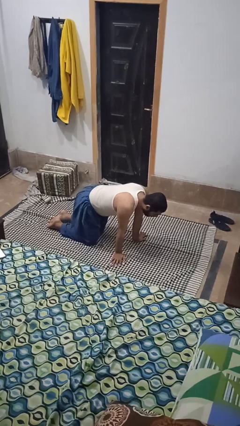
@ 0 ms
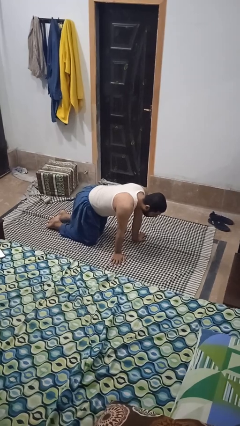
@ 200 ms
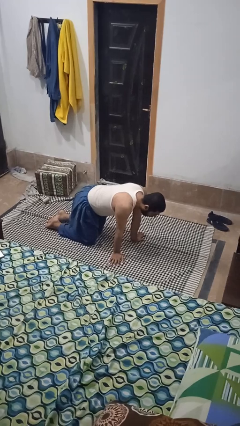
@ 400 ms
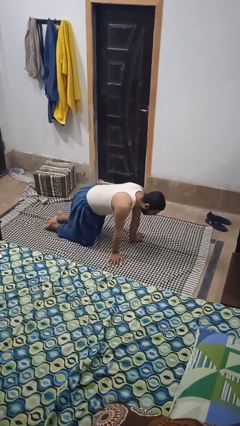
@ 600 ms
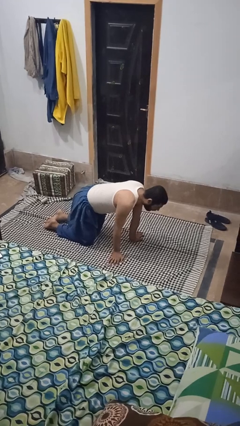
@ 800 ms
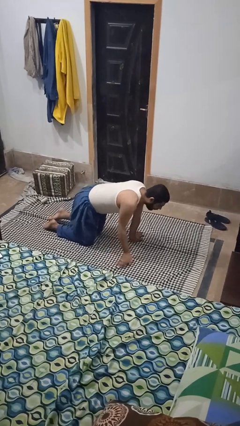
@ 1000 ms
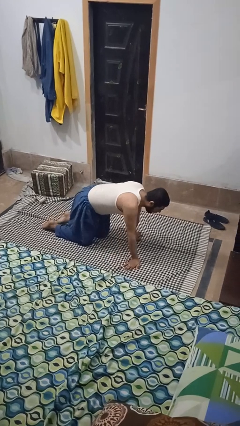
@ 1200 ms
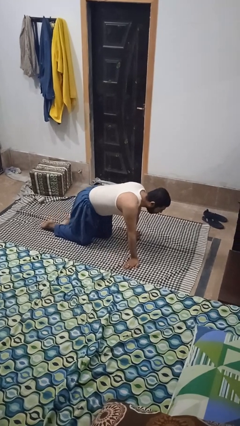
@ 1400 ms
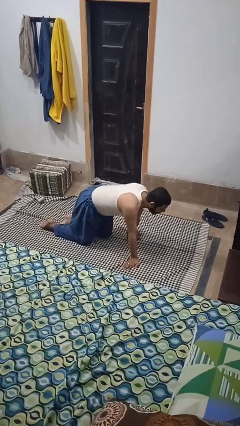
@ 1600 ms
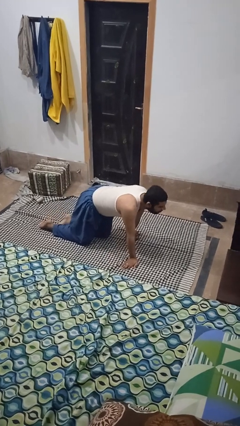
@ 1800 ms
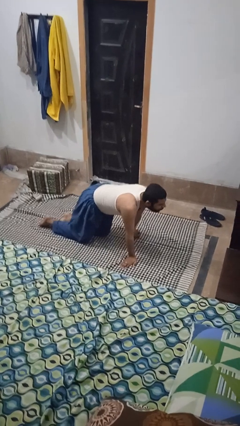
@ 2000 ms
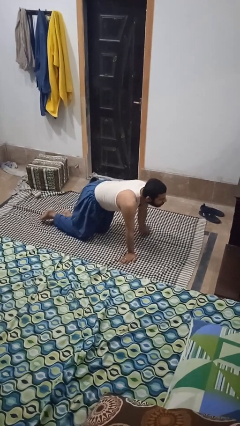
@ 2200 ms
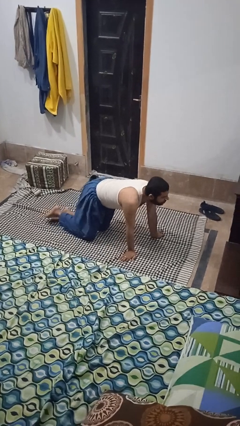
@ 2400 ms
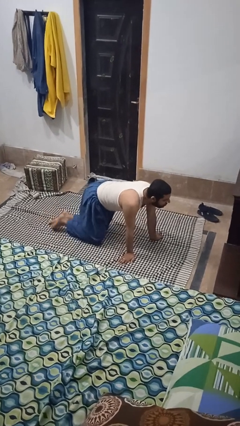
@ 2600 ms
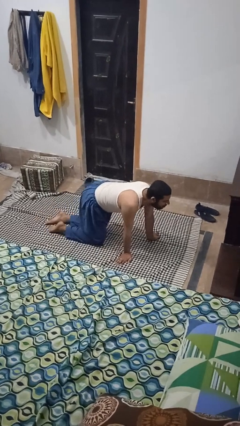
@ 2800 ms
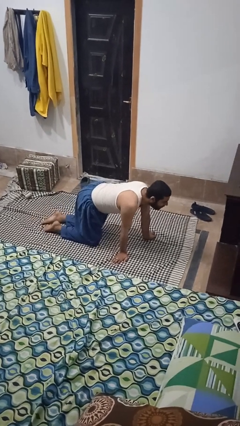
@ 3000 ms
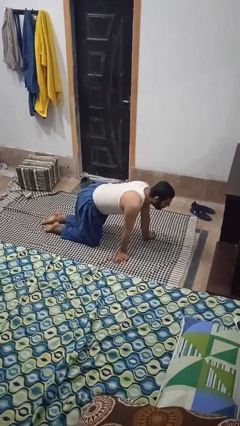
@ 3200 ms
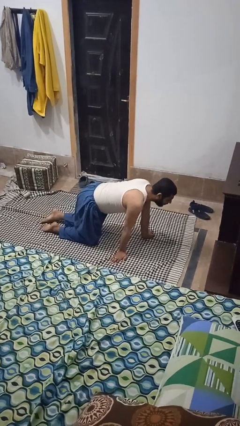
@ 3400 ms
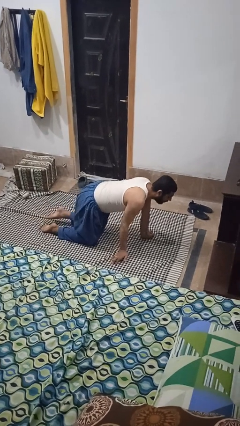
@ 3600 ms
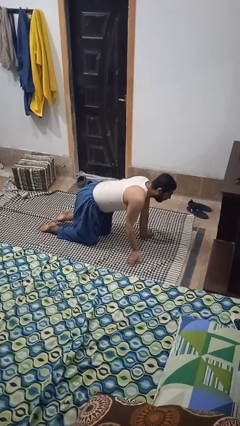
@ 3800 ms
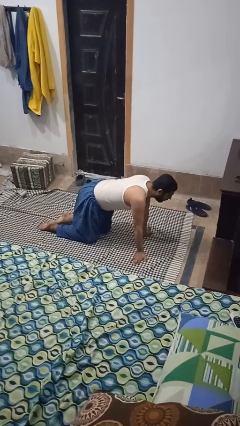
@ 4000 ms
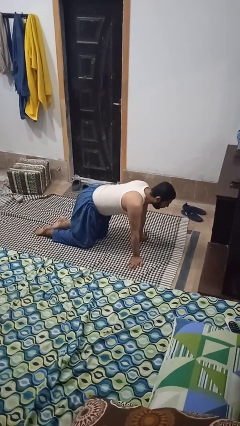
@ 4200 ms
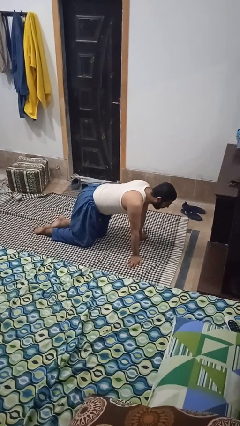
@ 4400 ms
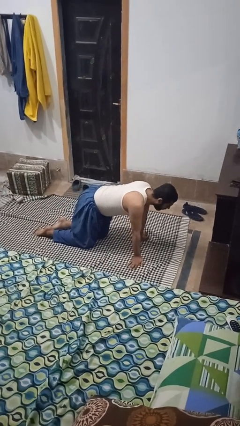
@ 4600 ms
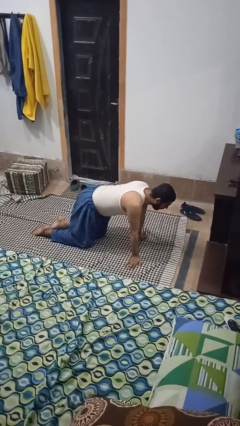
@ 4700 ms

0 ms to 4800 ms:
person crawls

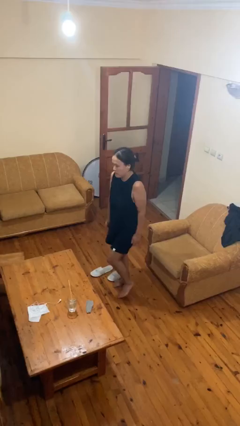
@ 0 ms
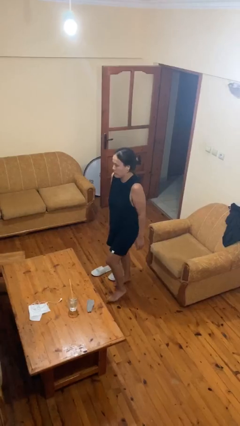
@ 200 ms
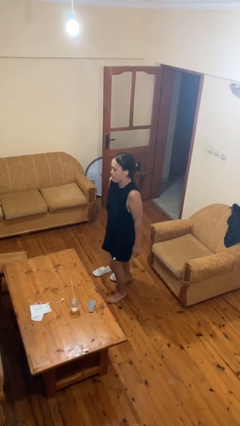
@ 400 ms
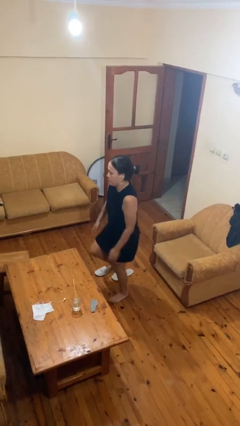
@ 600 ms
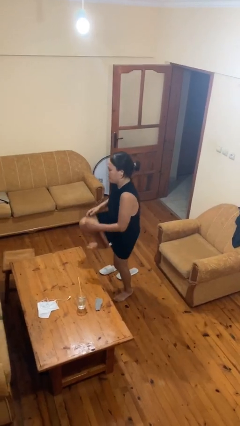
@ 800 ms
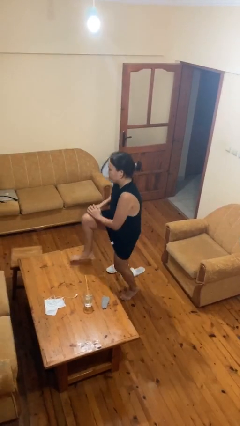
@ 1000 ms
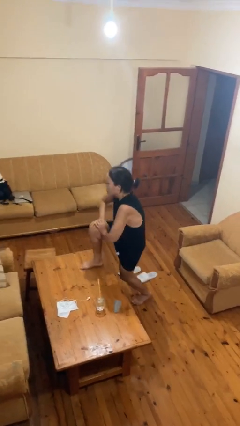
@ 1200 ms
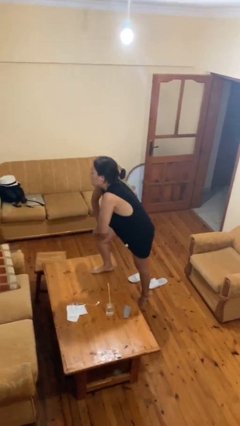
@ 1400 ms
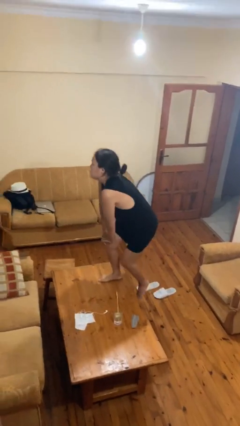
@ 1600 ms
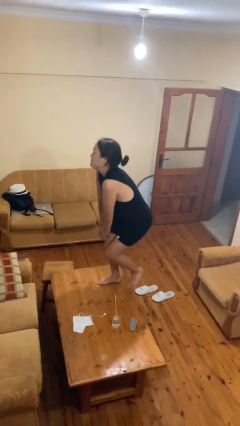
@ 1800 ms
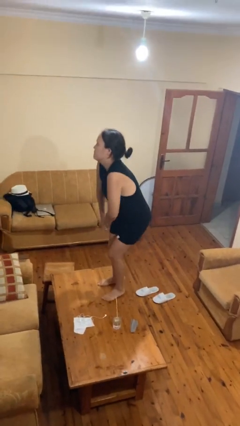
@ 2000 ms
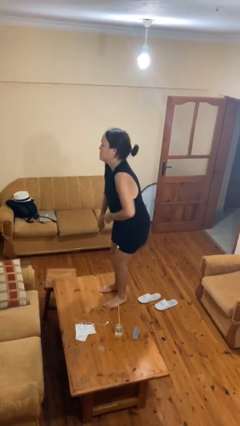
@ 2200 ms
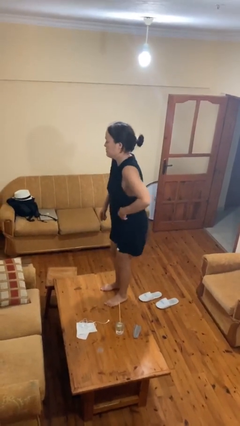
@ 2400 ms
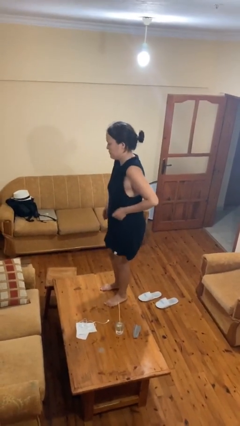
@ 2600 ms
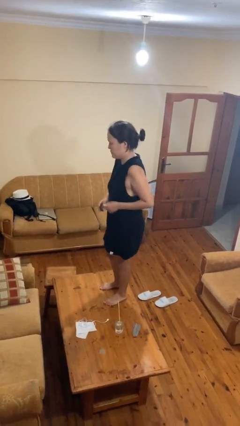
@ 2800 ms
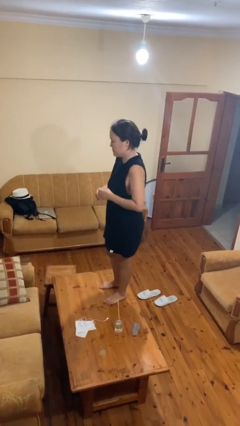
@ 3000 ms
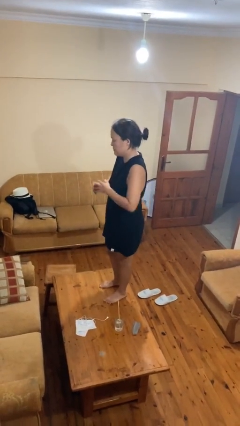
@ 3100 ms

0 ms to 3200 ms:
person climbs on table

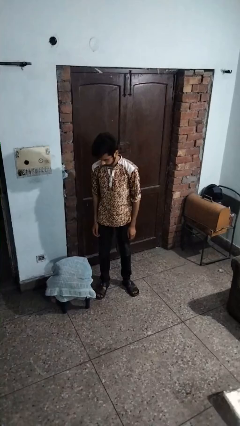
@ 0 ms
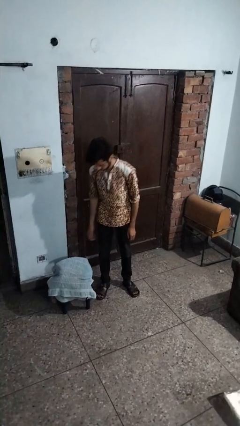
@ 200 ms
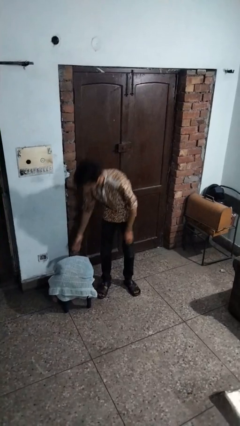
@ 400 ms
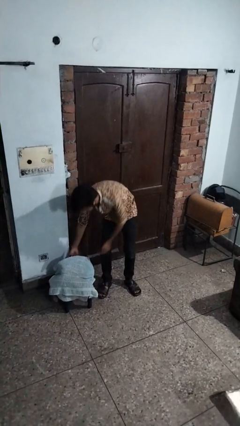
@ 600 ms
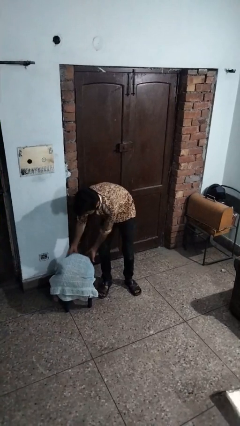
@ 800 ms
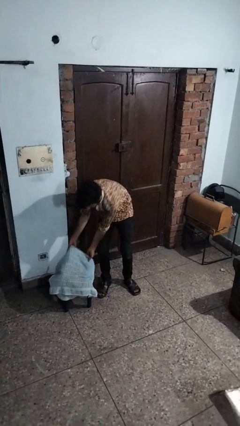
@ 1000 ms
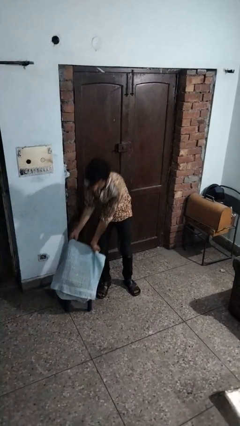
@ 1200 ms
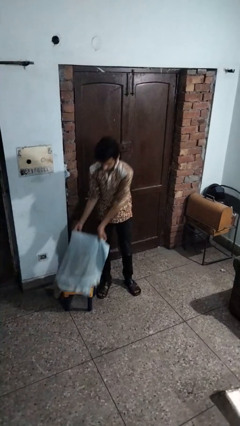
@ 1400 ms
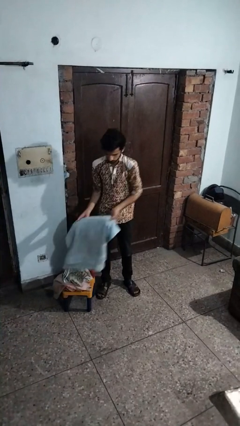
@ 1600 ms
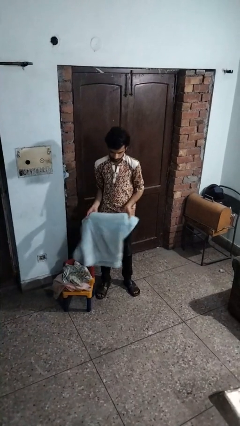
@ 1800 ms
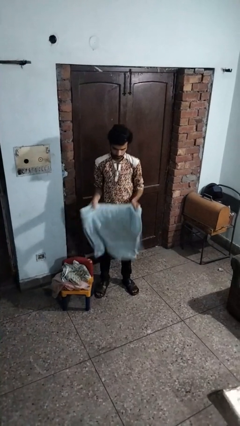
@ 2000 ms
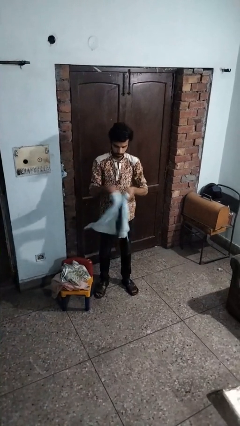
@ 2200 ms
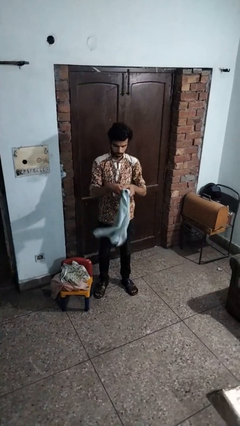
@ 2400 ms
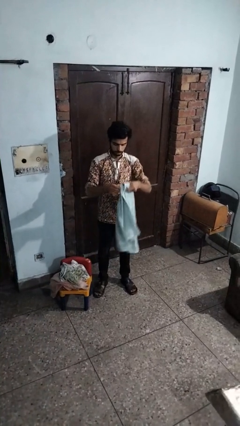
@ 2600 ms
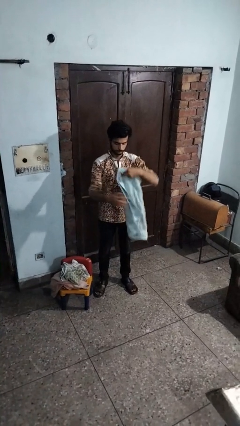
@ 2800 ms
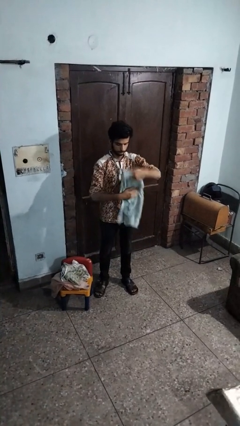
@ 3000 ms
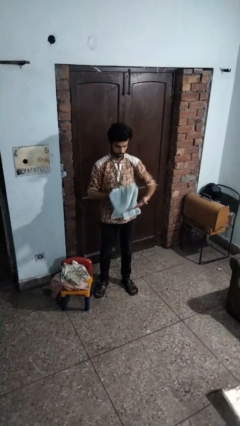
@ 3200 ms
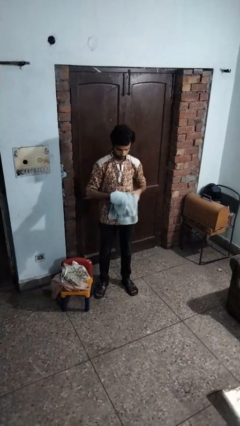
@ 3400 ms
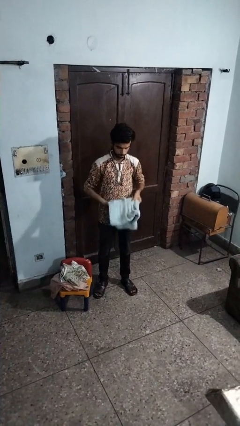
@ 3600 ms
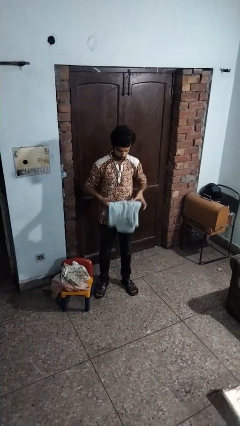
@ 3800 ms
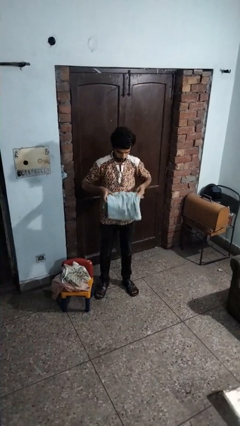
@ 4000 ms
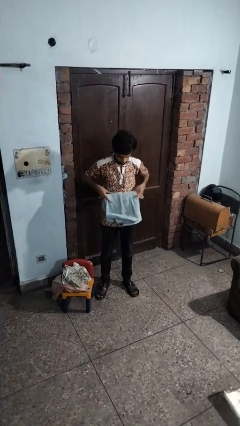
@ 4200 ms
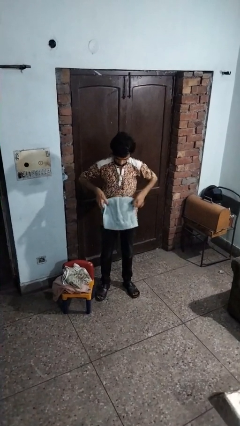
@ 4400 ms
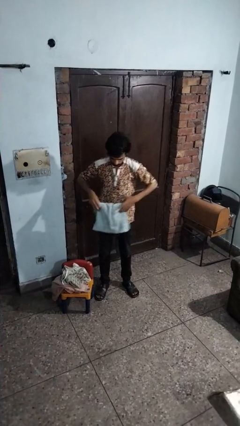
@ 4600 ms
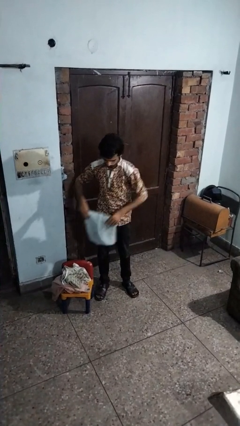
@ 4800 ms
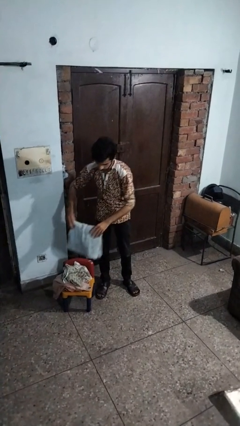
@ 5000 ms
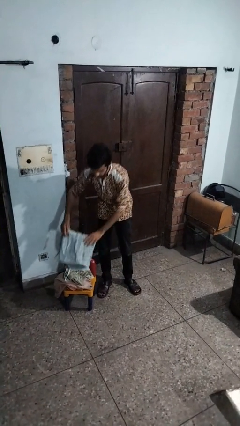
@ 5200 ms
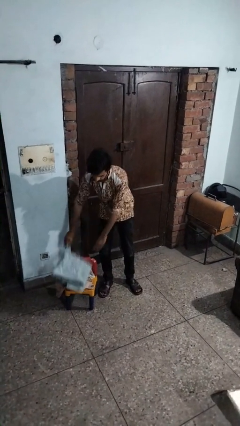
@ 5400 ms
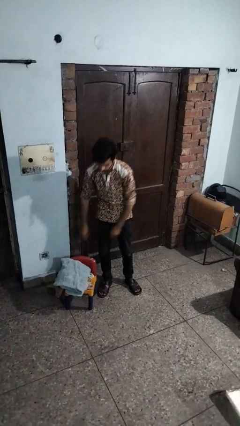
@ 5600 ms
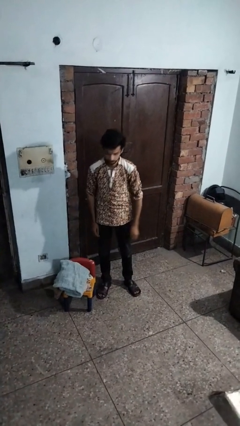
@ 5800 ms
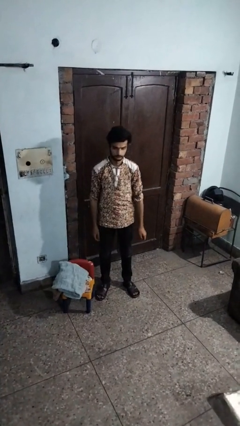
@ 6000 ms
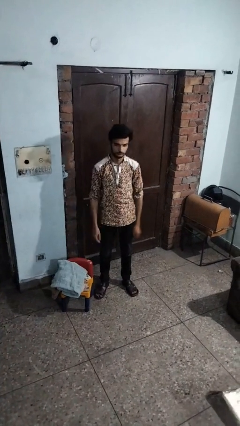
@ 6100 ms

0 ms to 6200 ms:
person folds towel

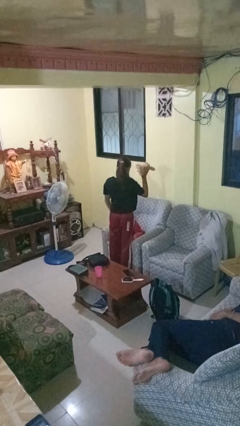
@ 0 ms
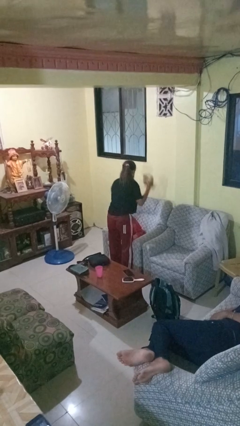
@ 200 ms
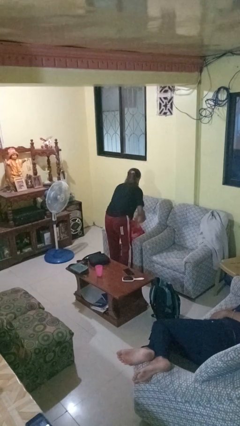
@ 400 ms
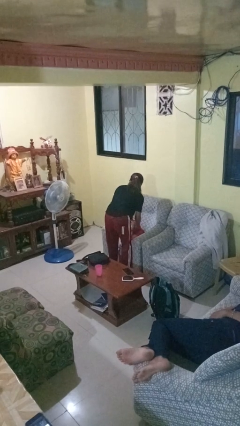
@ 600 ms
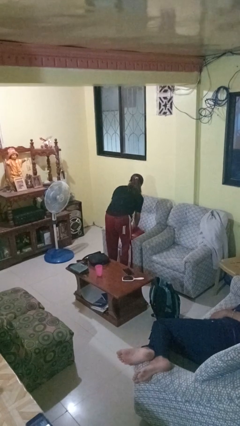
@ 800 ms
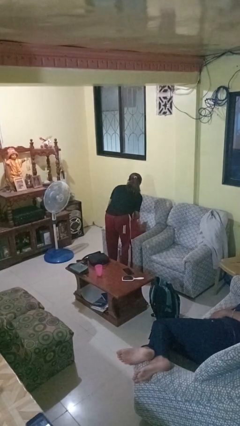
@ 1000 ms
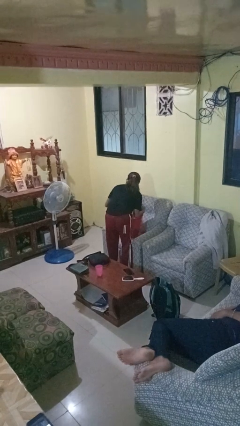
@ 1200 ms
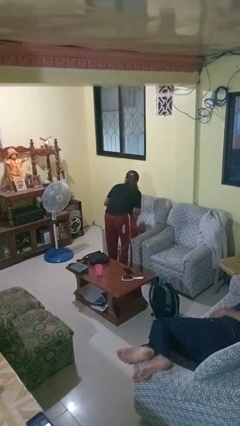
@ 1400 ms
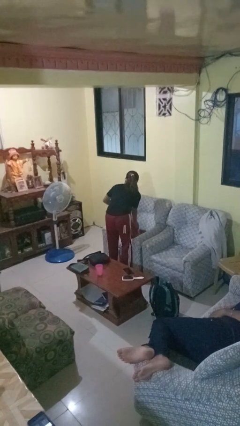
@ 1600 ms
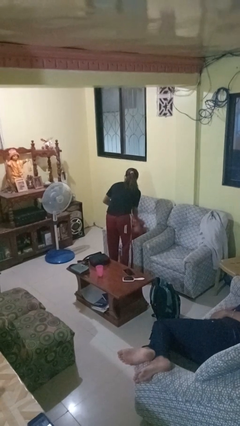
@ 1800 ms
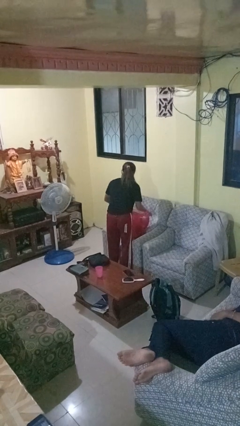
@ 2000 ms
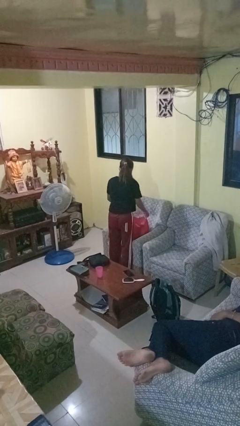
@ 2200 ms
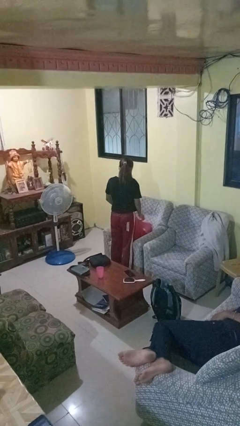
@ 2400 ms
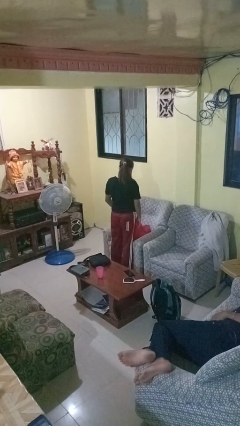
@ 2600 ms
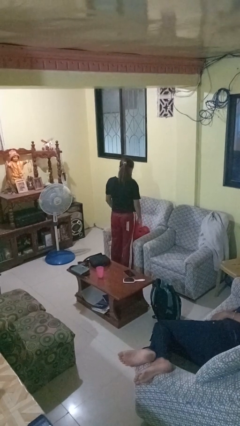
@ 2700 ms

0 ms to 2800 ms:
person puts object into bag

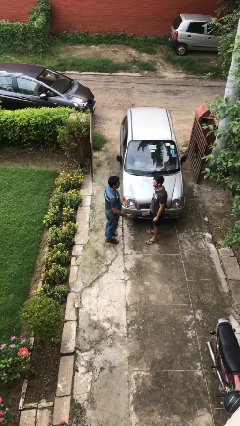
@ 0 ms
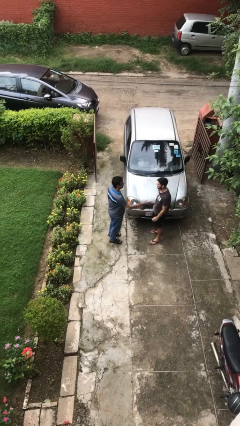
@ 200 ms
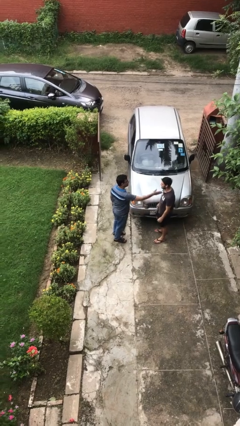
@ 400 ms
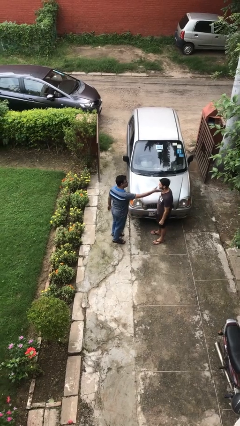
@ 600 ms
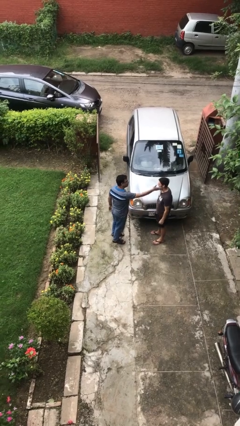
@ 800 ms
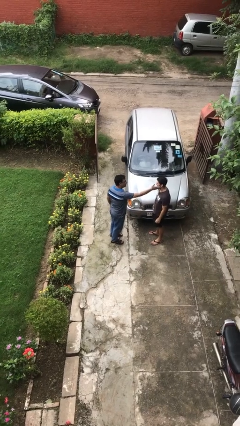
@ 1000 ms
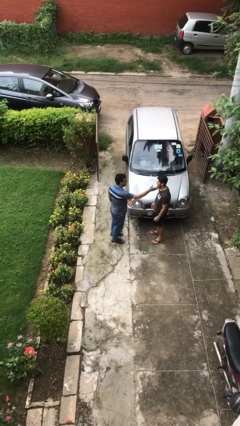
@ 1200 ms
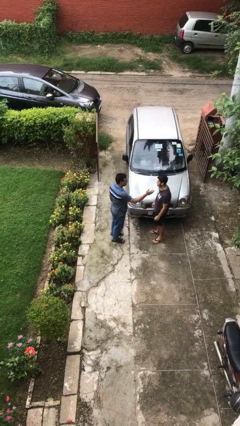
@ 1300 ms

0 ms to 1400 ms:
person touches face of person
